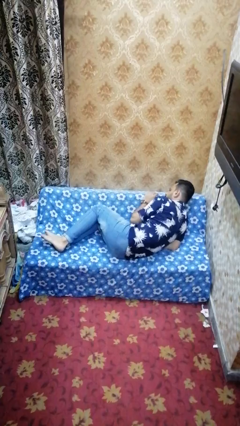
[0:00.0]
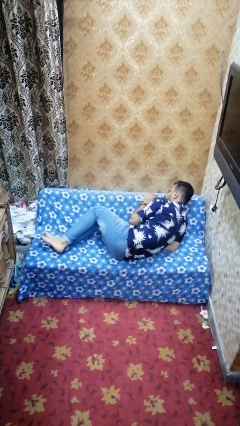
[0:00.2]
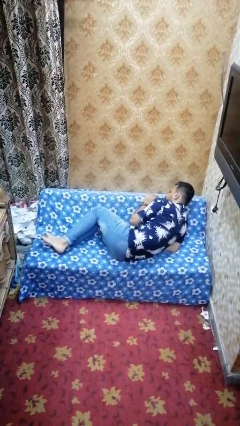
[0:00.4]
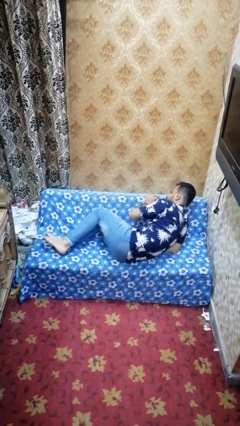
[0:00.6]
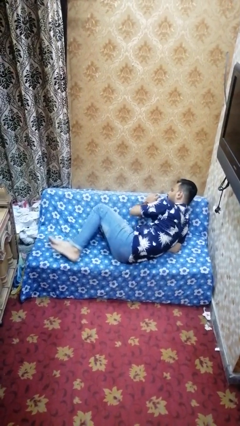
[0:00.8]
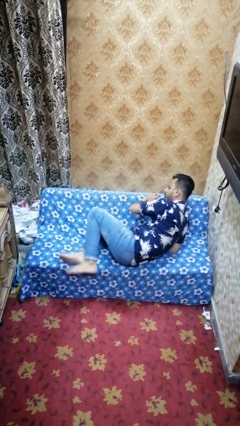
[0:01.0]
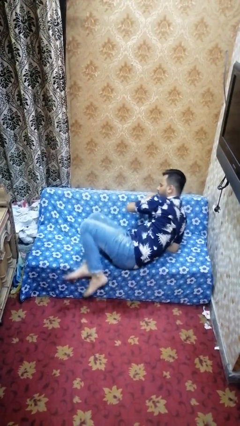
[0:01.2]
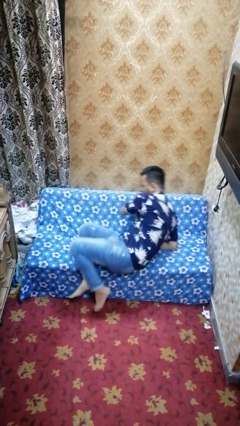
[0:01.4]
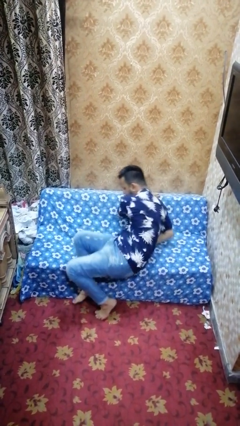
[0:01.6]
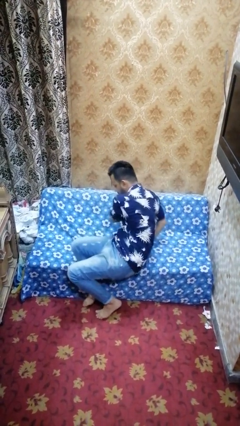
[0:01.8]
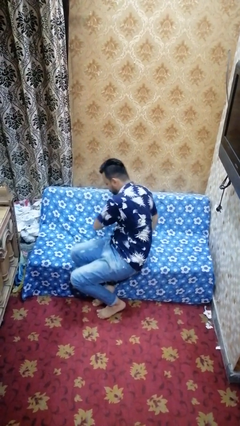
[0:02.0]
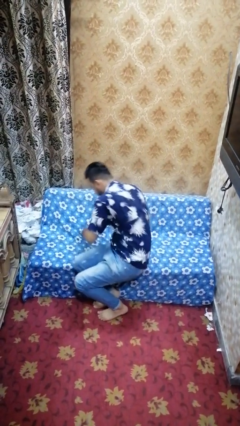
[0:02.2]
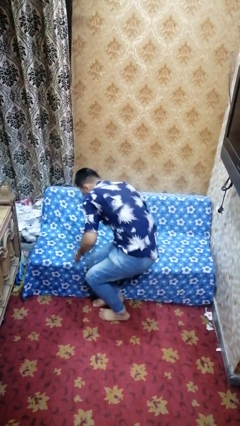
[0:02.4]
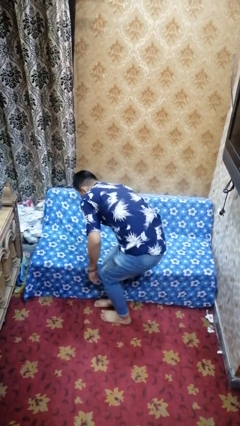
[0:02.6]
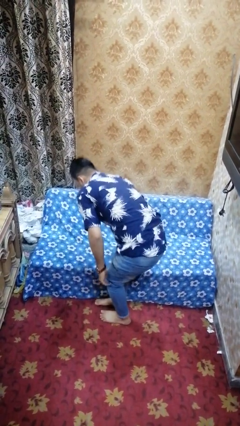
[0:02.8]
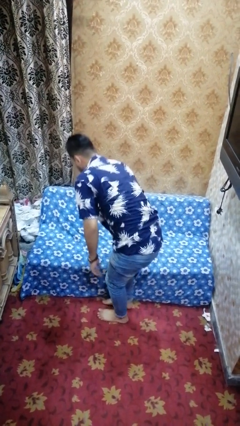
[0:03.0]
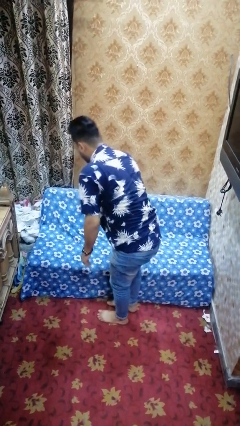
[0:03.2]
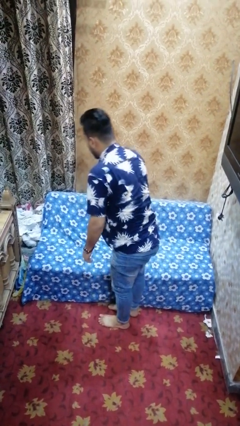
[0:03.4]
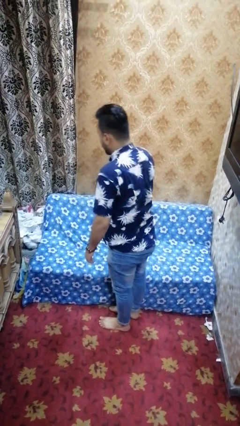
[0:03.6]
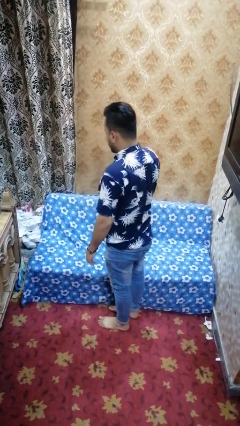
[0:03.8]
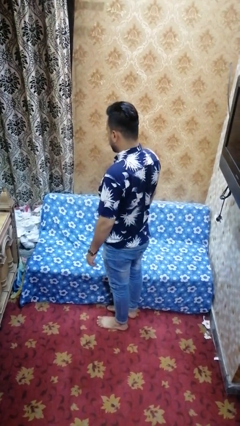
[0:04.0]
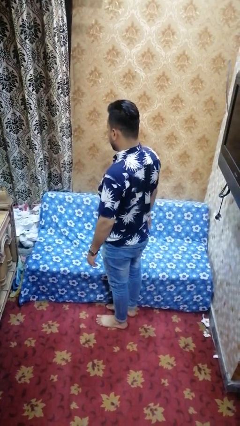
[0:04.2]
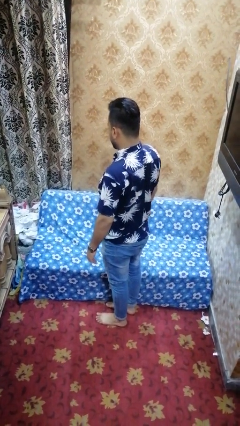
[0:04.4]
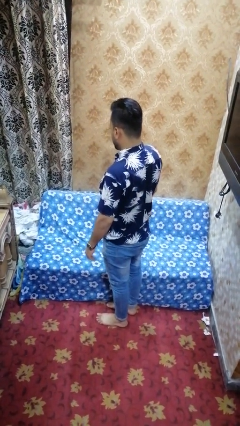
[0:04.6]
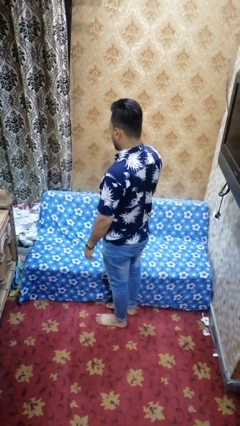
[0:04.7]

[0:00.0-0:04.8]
person stands up

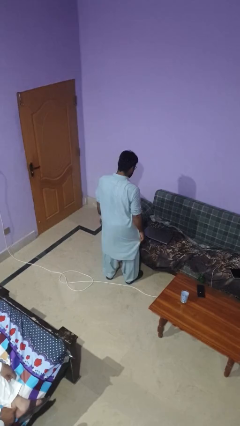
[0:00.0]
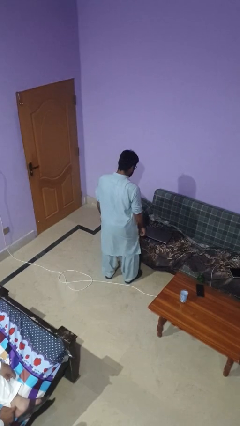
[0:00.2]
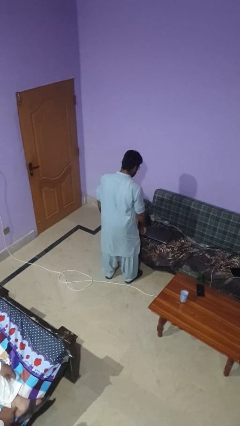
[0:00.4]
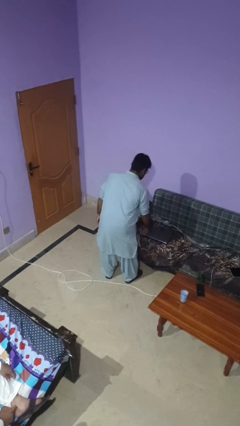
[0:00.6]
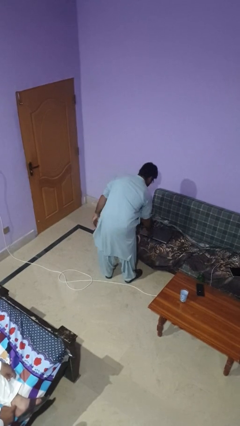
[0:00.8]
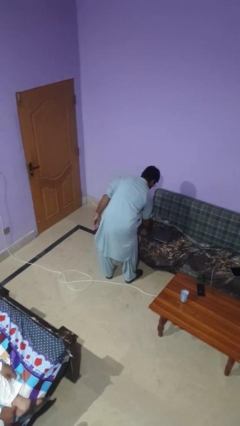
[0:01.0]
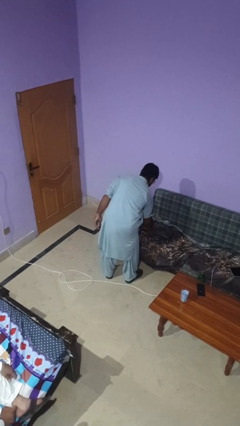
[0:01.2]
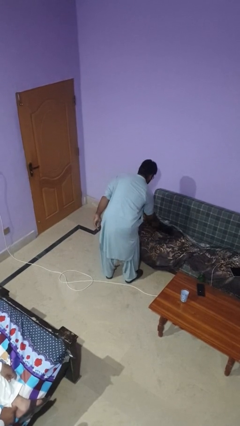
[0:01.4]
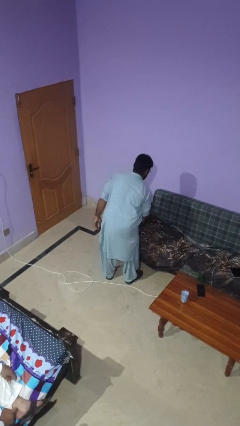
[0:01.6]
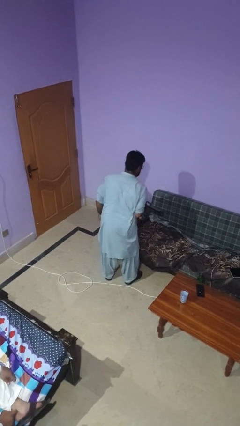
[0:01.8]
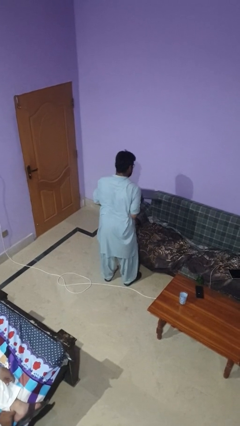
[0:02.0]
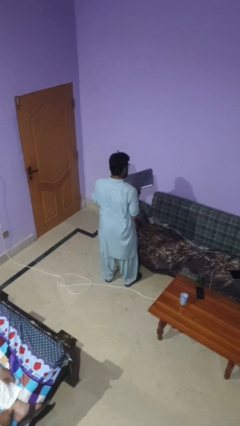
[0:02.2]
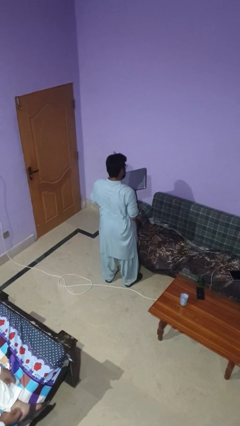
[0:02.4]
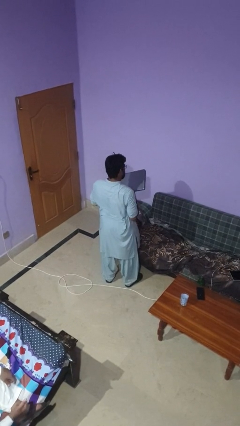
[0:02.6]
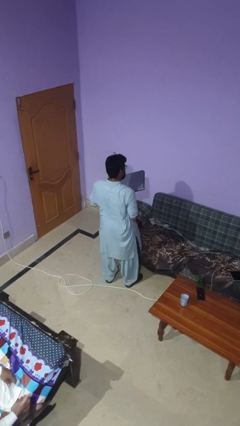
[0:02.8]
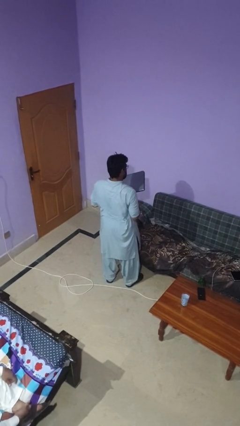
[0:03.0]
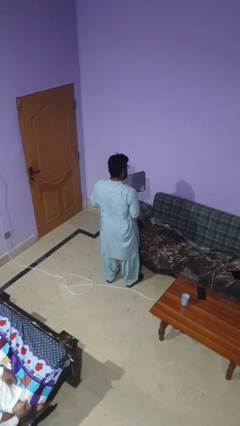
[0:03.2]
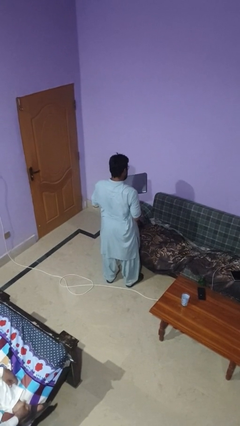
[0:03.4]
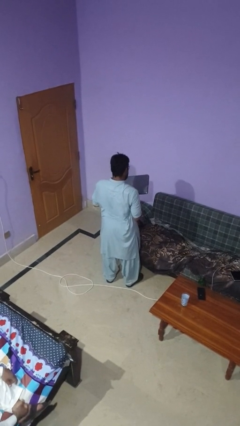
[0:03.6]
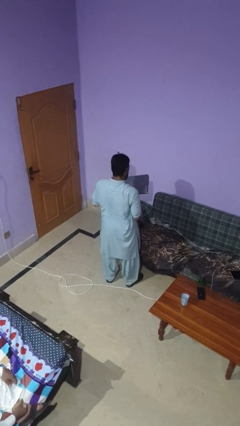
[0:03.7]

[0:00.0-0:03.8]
person picks up object from couch

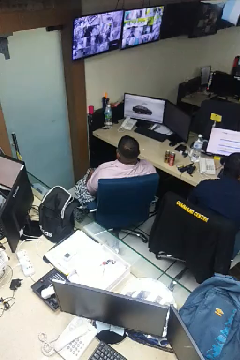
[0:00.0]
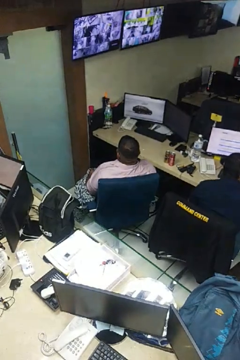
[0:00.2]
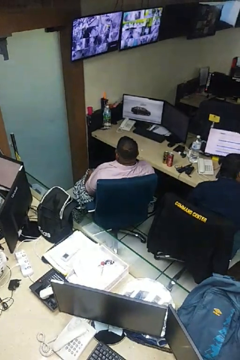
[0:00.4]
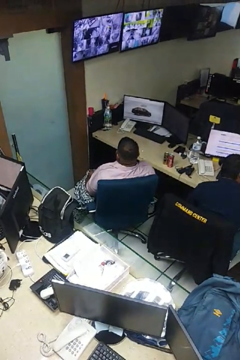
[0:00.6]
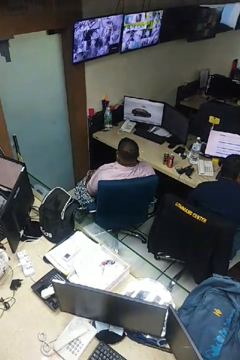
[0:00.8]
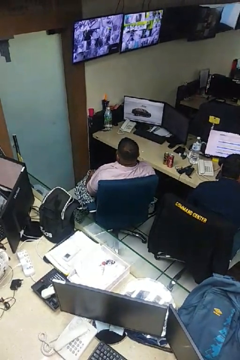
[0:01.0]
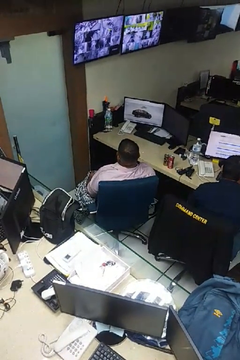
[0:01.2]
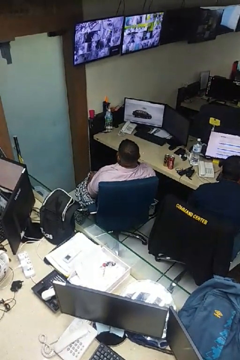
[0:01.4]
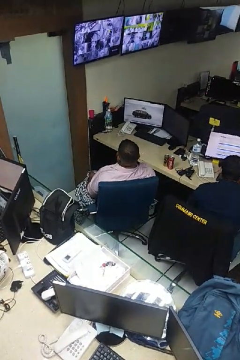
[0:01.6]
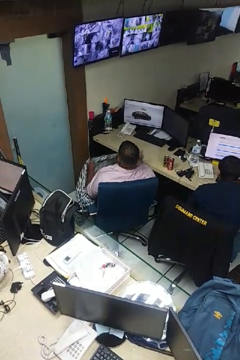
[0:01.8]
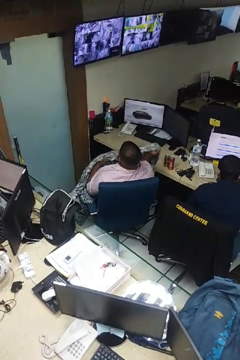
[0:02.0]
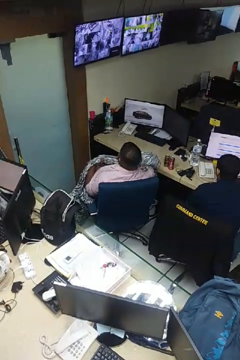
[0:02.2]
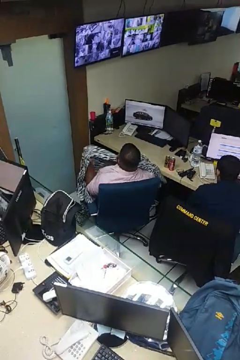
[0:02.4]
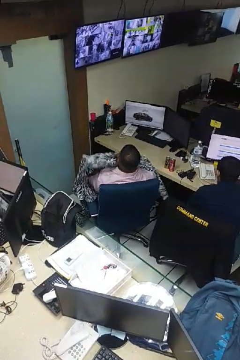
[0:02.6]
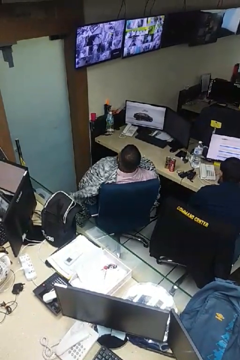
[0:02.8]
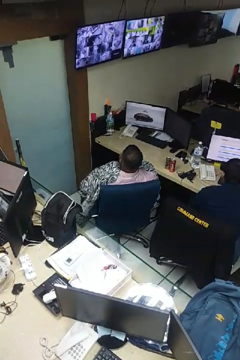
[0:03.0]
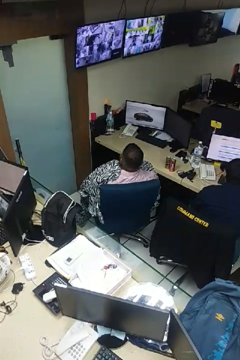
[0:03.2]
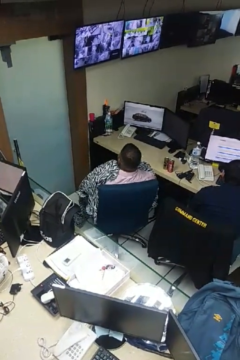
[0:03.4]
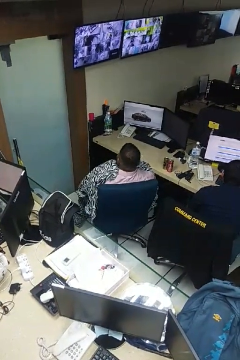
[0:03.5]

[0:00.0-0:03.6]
person covers with blanket

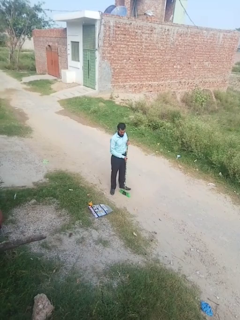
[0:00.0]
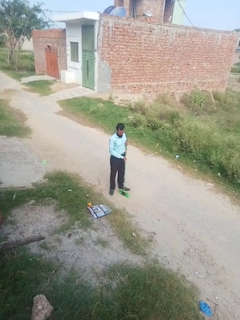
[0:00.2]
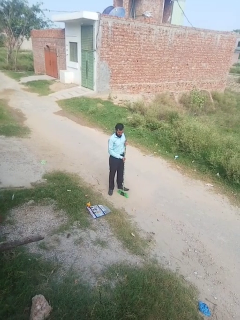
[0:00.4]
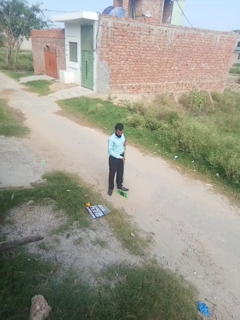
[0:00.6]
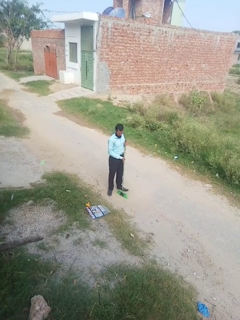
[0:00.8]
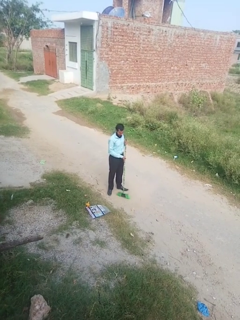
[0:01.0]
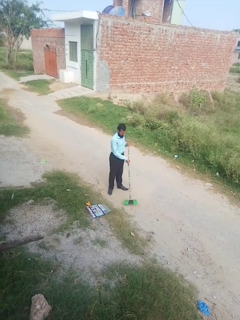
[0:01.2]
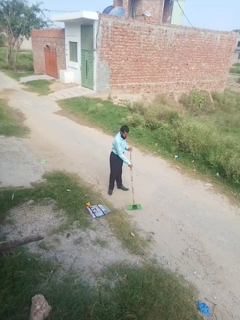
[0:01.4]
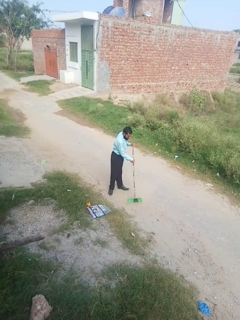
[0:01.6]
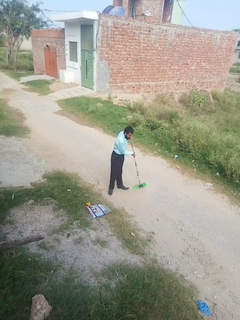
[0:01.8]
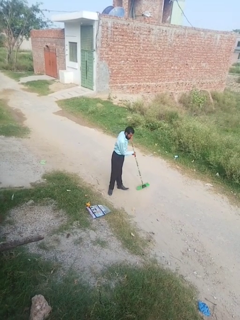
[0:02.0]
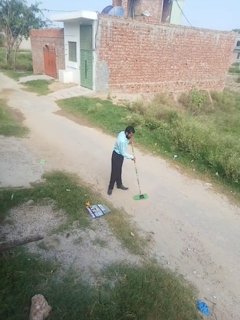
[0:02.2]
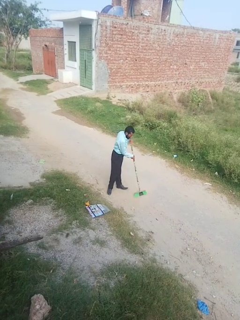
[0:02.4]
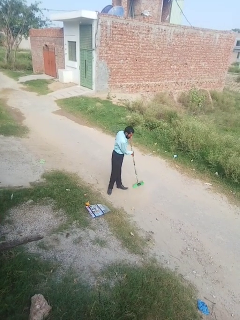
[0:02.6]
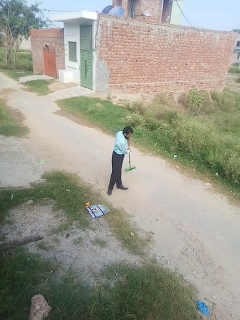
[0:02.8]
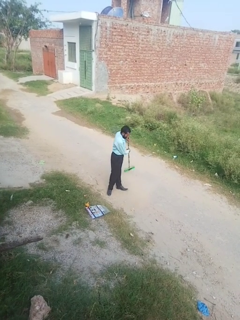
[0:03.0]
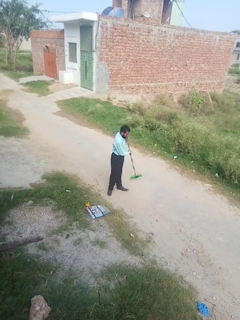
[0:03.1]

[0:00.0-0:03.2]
person sweeps floor

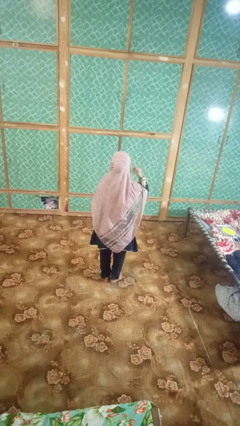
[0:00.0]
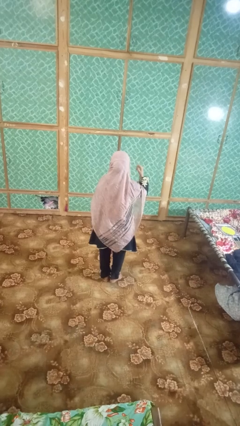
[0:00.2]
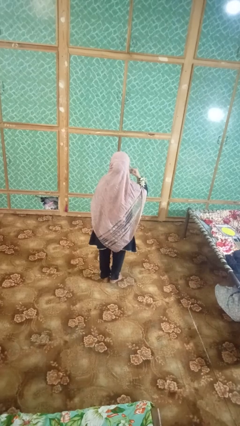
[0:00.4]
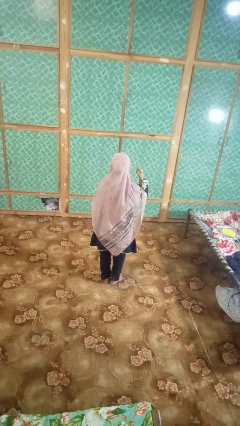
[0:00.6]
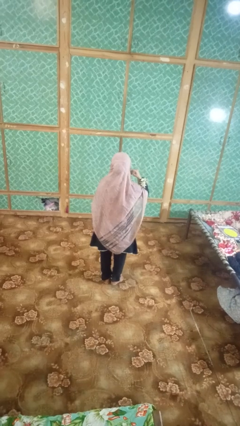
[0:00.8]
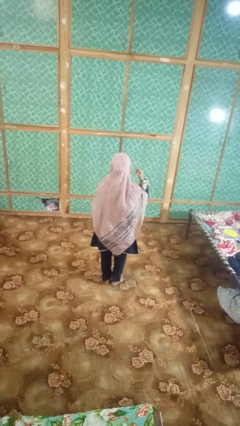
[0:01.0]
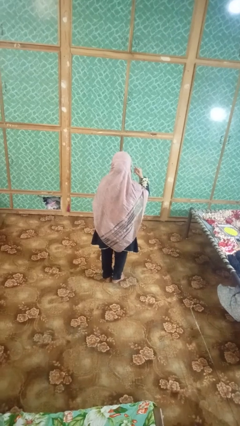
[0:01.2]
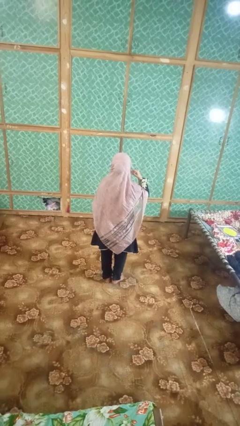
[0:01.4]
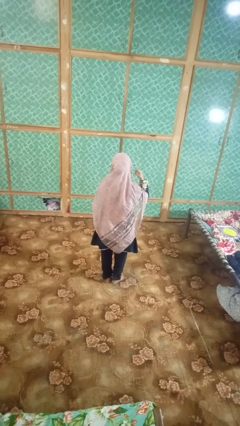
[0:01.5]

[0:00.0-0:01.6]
person gestures listen closely

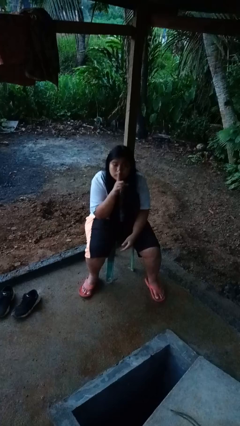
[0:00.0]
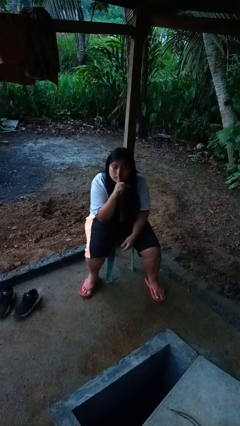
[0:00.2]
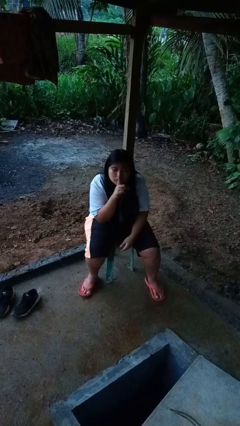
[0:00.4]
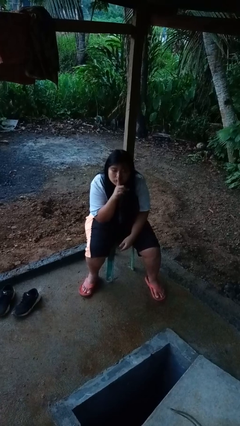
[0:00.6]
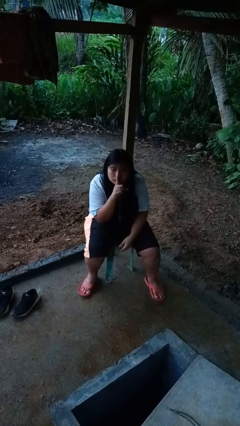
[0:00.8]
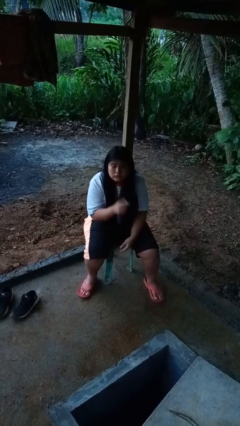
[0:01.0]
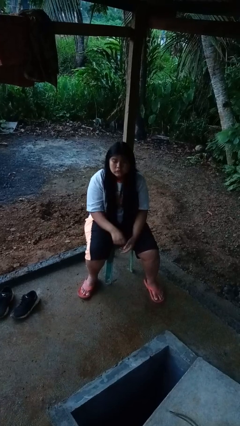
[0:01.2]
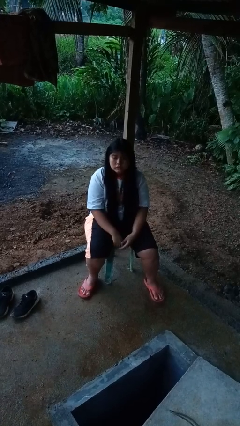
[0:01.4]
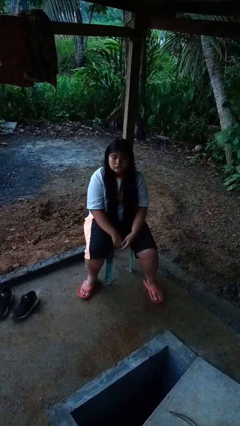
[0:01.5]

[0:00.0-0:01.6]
person gestures be quiet
